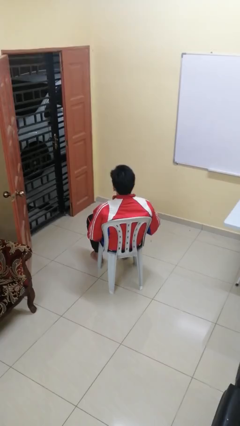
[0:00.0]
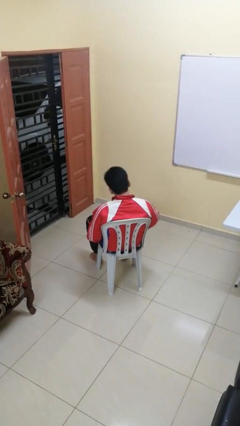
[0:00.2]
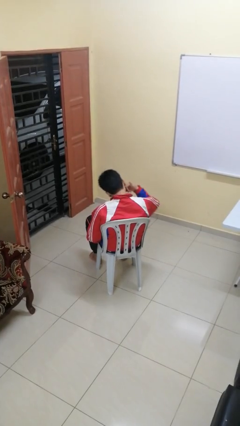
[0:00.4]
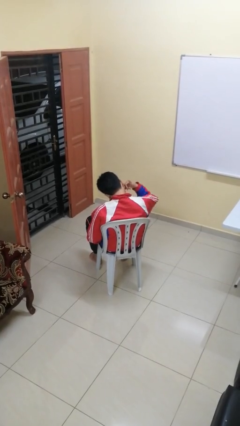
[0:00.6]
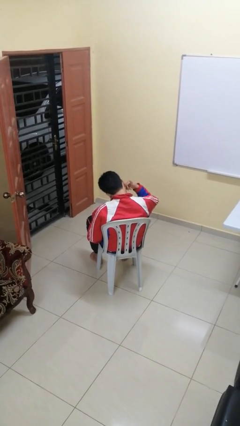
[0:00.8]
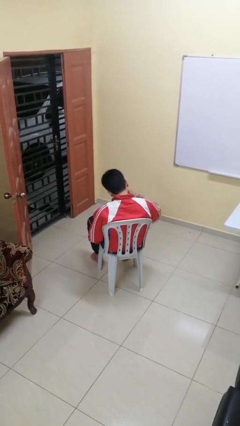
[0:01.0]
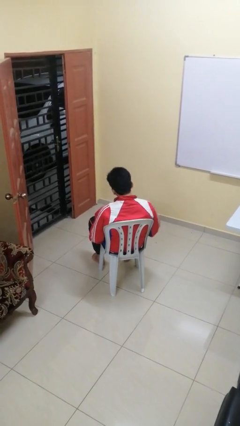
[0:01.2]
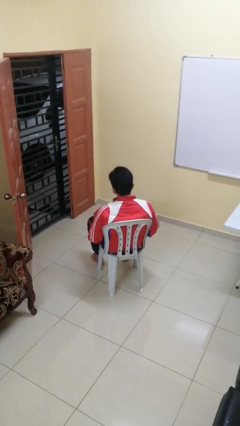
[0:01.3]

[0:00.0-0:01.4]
person gestures call me

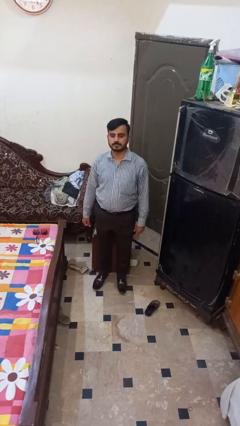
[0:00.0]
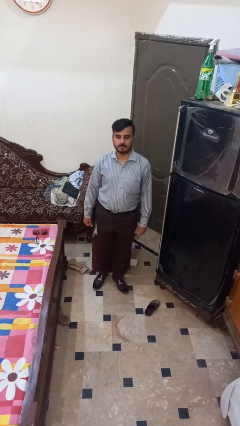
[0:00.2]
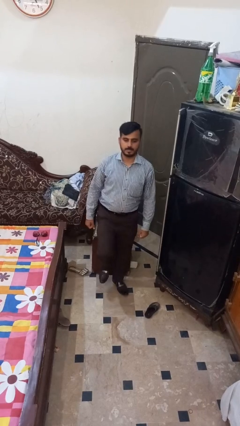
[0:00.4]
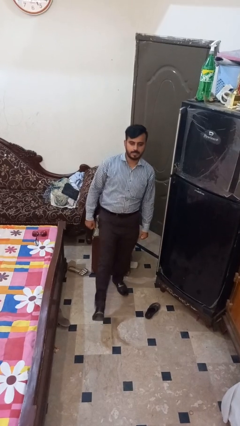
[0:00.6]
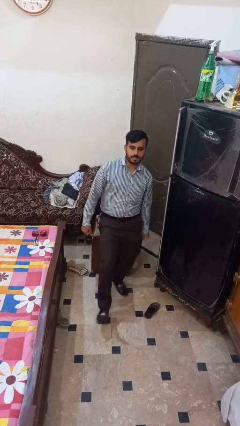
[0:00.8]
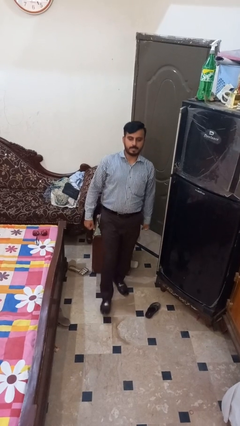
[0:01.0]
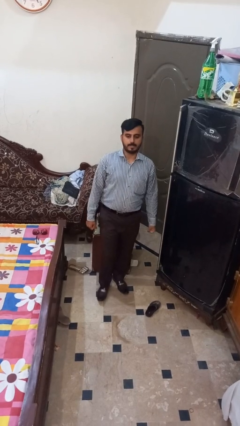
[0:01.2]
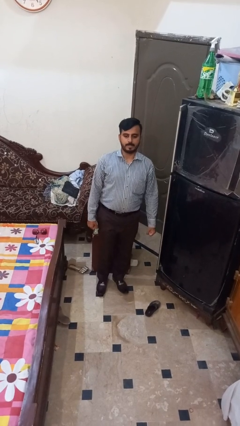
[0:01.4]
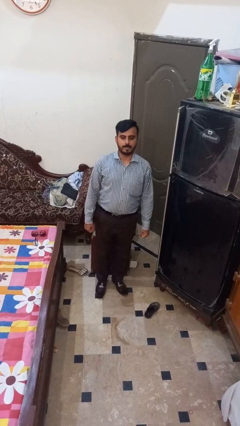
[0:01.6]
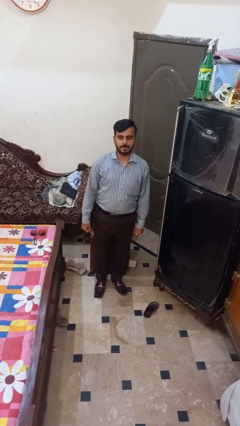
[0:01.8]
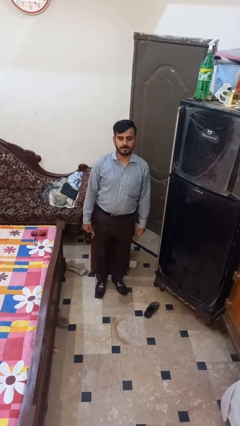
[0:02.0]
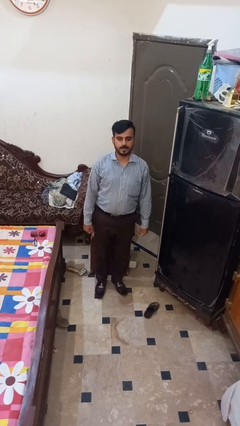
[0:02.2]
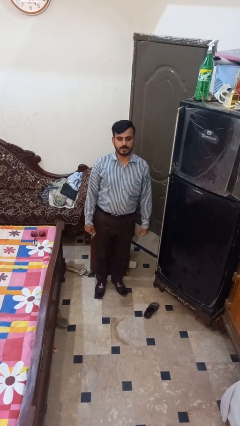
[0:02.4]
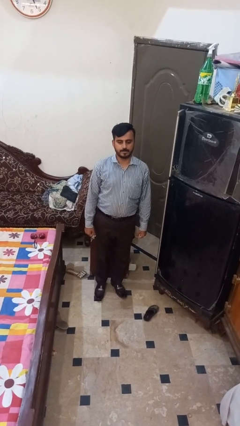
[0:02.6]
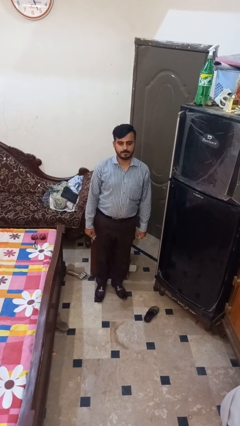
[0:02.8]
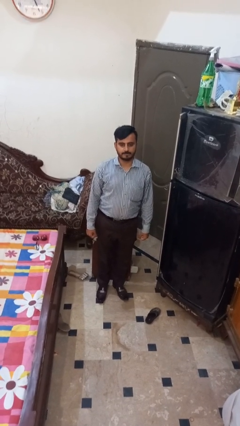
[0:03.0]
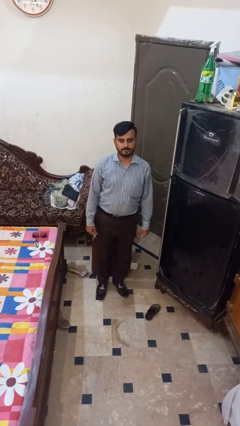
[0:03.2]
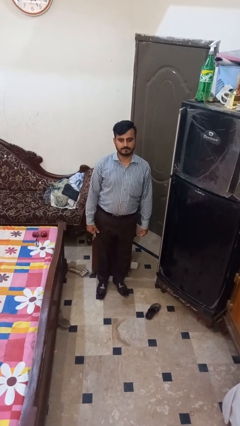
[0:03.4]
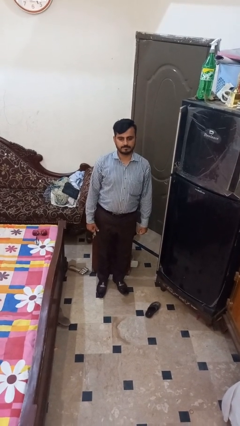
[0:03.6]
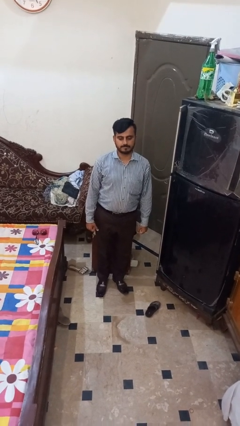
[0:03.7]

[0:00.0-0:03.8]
person karate kicks

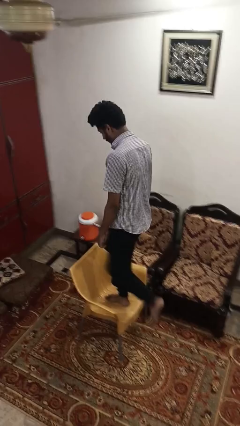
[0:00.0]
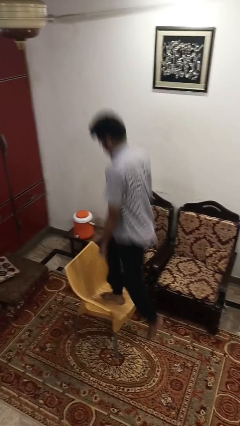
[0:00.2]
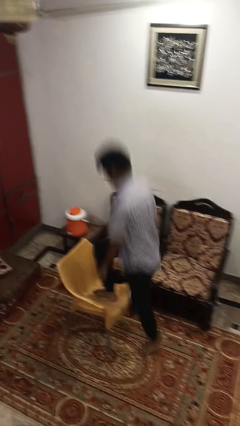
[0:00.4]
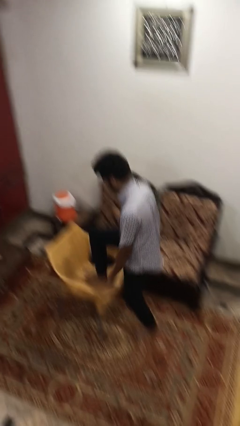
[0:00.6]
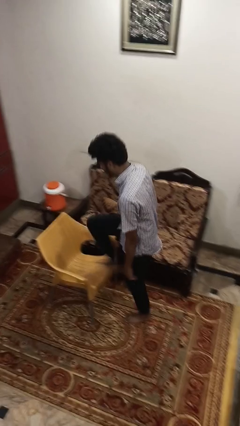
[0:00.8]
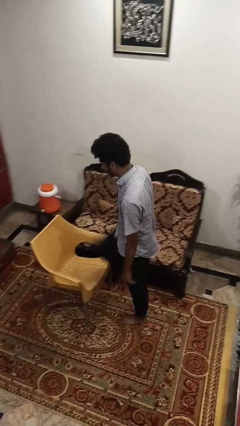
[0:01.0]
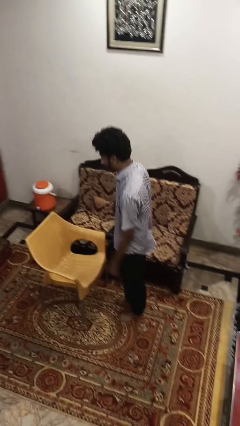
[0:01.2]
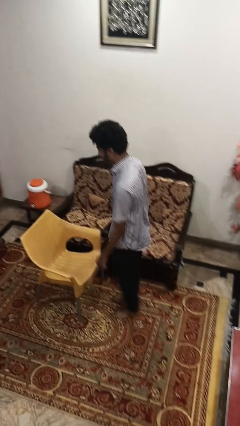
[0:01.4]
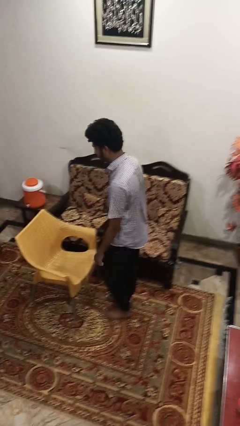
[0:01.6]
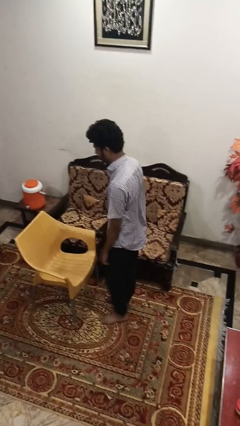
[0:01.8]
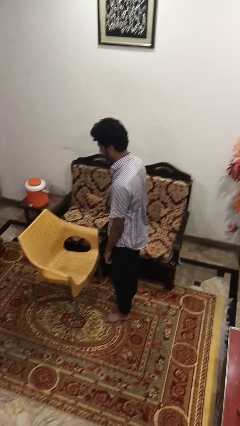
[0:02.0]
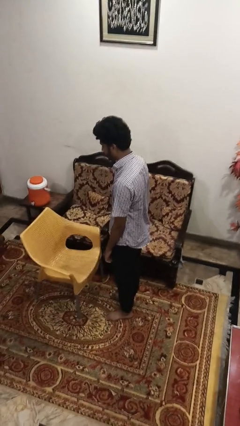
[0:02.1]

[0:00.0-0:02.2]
person climbs off chair

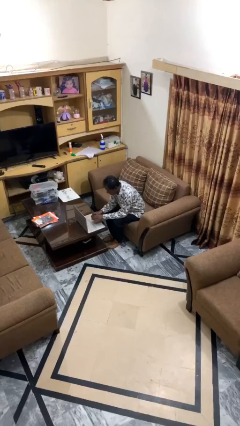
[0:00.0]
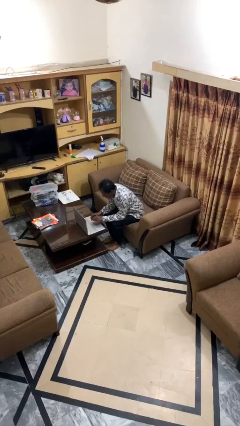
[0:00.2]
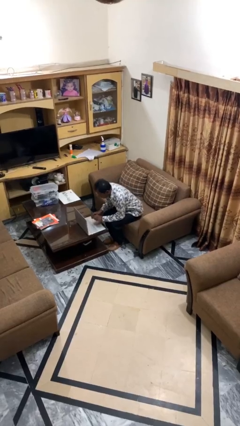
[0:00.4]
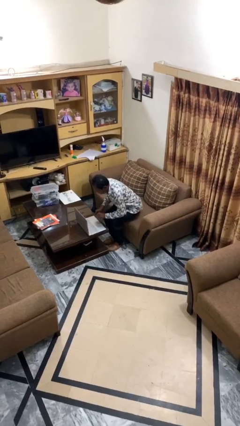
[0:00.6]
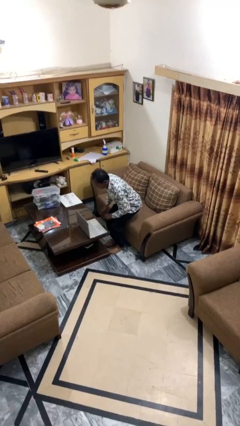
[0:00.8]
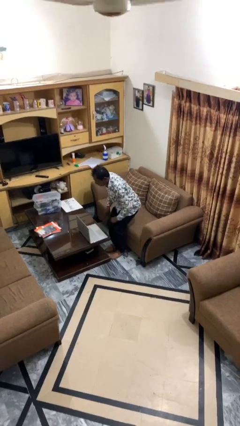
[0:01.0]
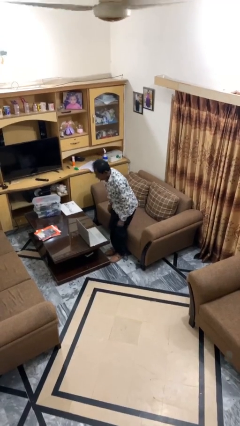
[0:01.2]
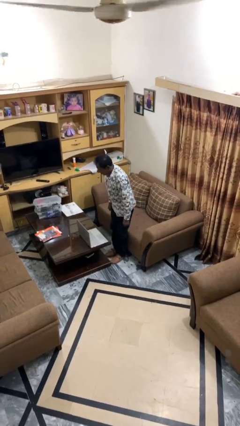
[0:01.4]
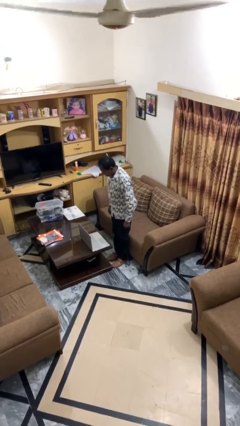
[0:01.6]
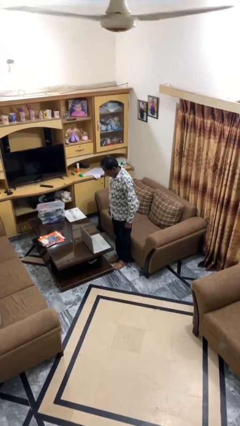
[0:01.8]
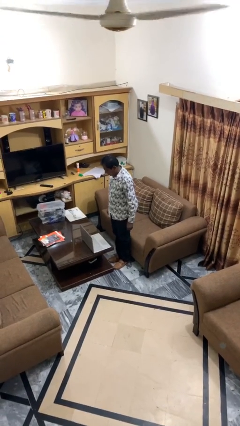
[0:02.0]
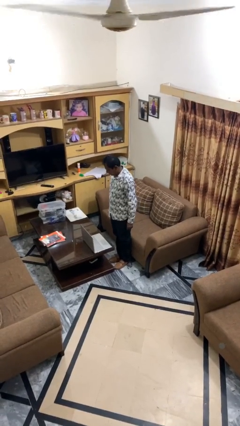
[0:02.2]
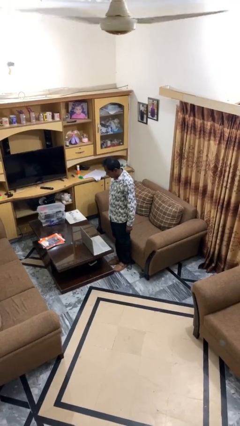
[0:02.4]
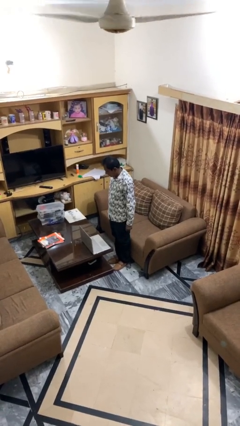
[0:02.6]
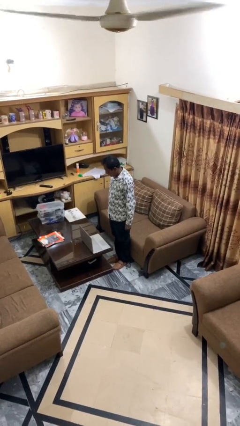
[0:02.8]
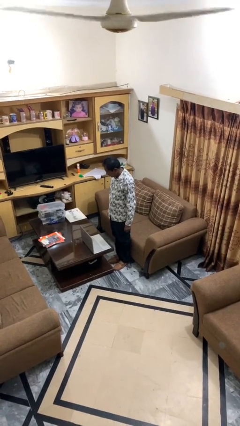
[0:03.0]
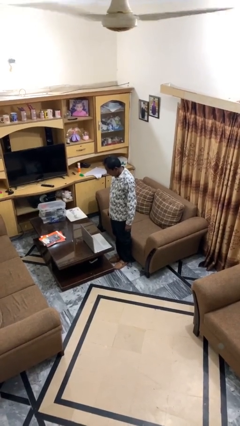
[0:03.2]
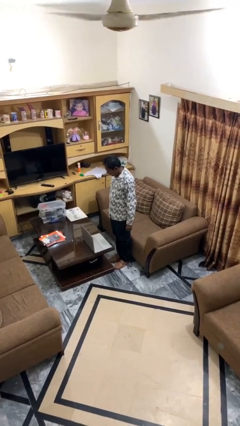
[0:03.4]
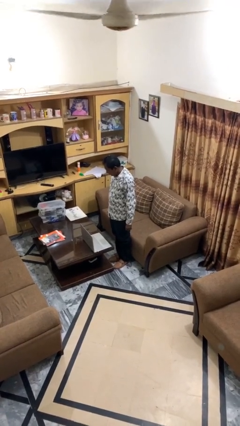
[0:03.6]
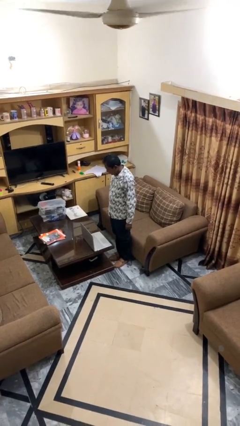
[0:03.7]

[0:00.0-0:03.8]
person stands up

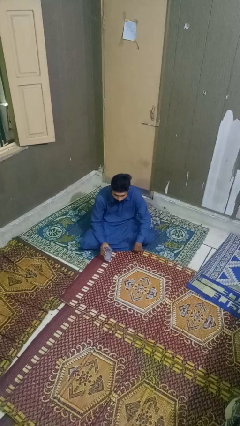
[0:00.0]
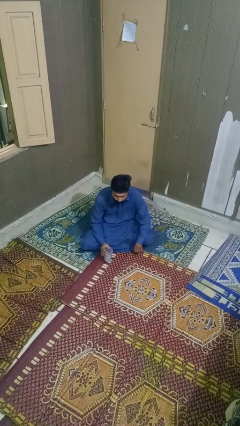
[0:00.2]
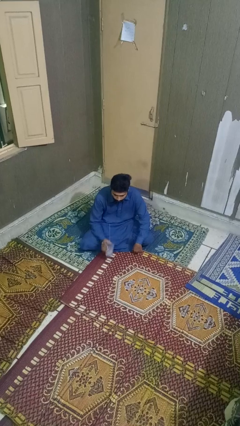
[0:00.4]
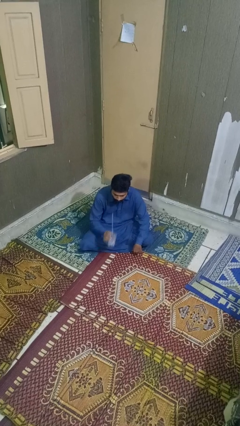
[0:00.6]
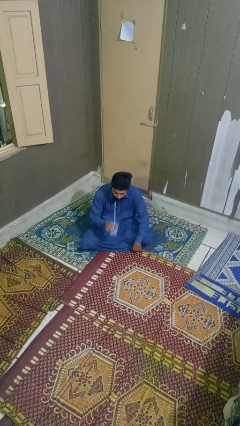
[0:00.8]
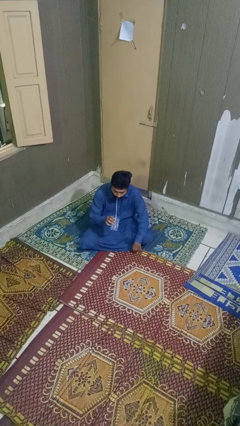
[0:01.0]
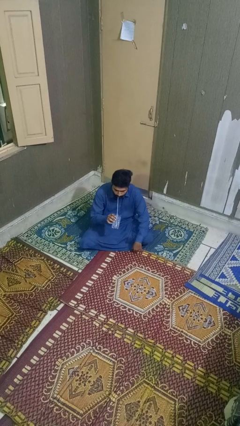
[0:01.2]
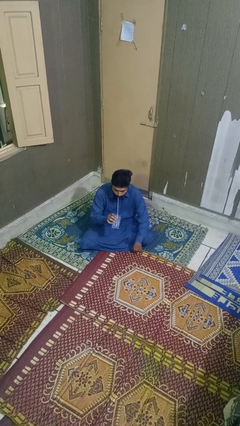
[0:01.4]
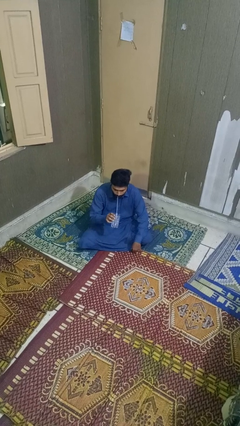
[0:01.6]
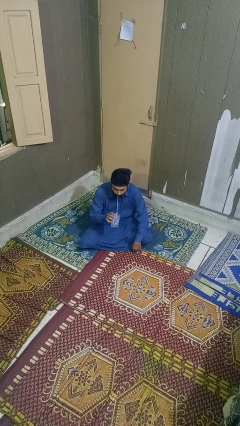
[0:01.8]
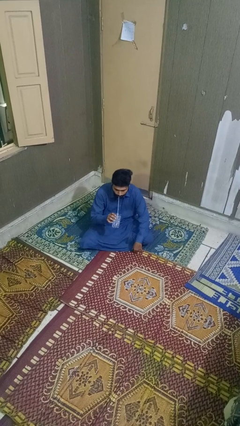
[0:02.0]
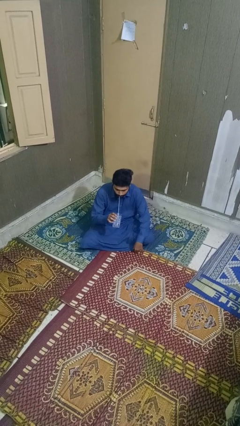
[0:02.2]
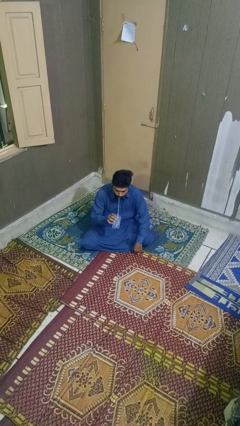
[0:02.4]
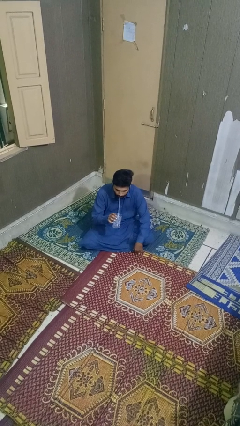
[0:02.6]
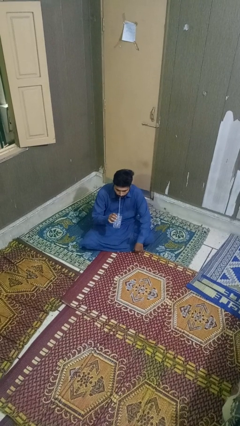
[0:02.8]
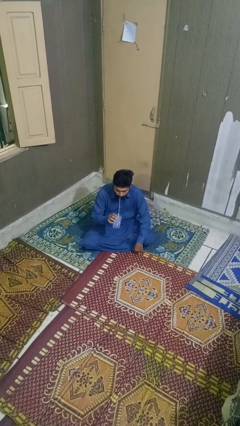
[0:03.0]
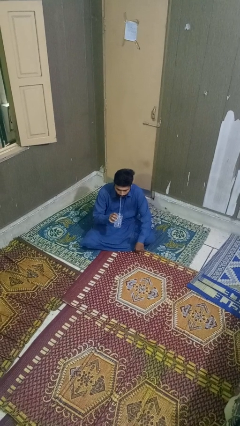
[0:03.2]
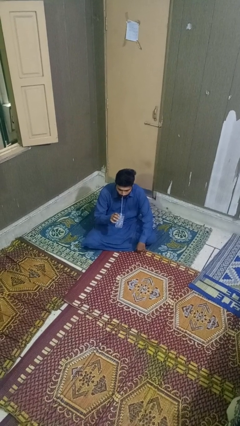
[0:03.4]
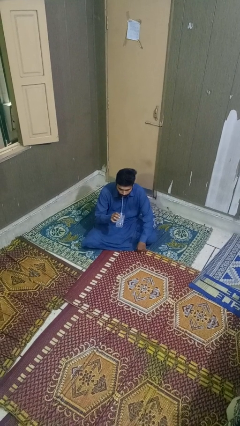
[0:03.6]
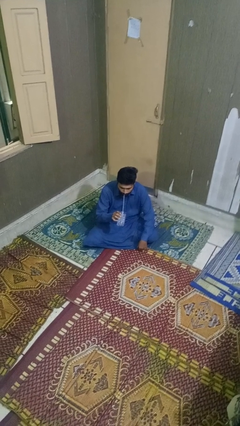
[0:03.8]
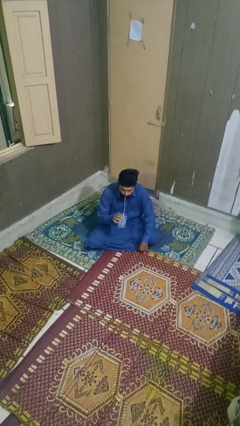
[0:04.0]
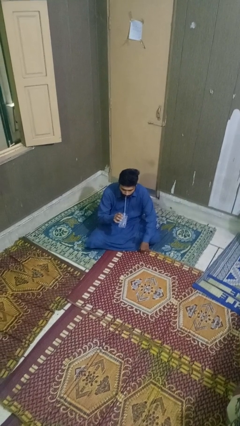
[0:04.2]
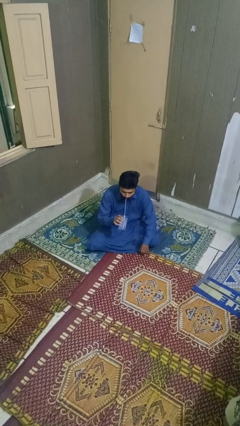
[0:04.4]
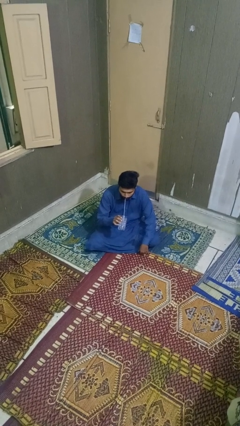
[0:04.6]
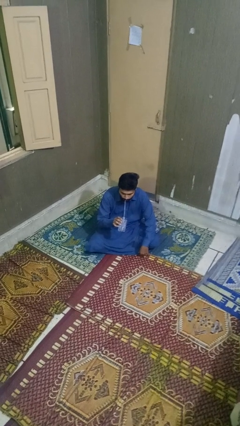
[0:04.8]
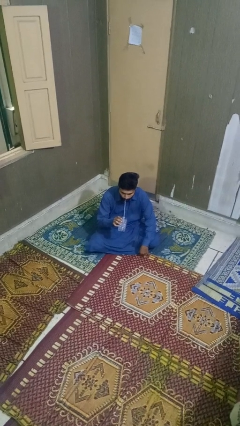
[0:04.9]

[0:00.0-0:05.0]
person drinks from straw

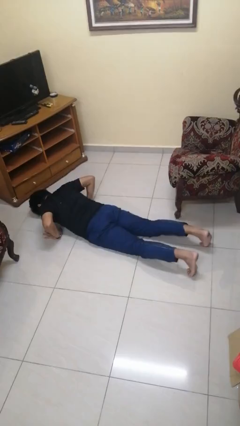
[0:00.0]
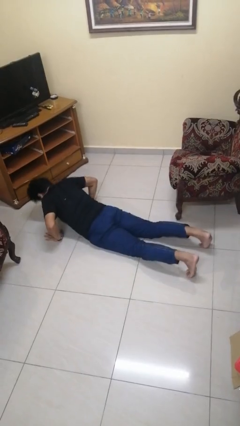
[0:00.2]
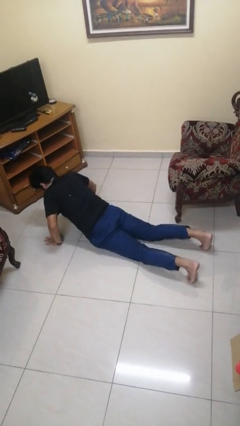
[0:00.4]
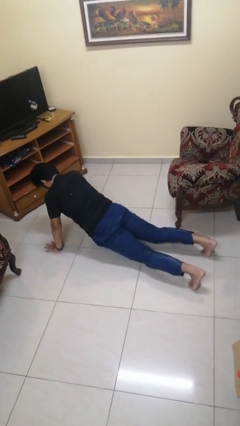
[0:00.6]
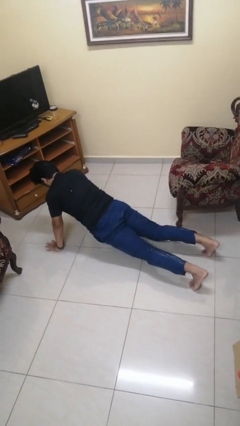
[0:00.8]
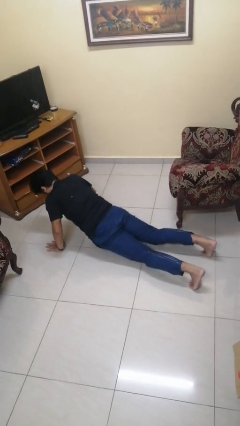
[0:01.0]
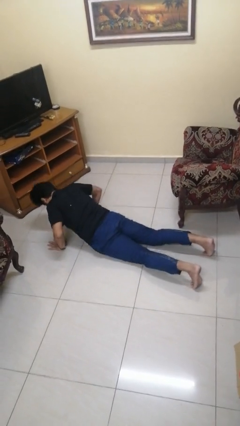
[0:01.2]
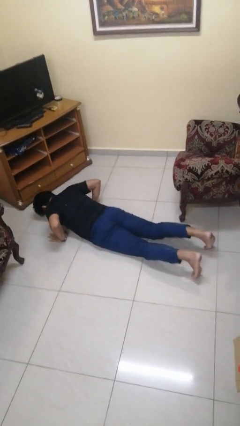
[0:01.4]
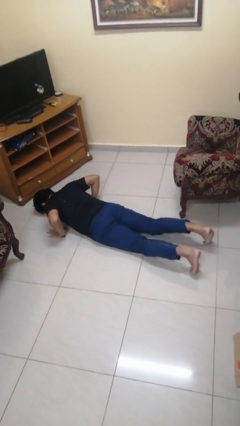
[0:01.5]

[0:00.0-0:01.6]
person exercises with pushup
